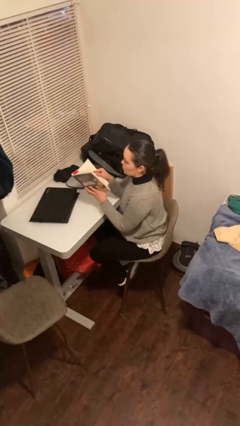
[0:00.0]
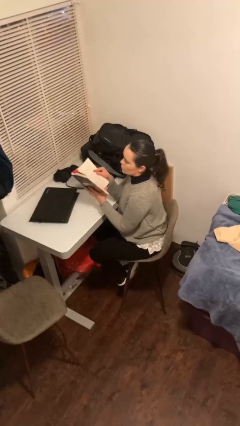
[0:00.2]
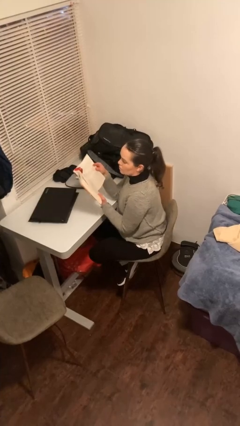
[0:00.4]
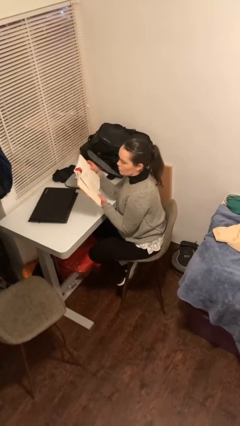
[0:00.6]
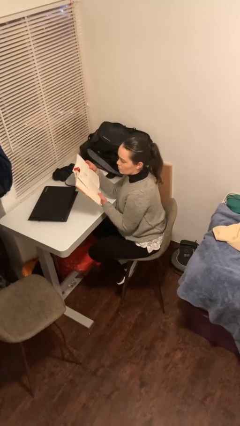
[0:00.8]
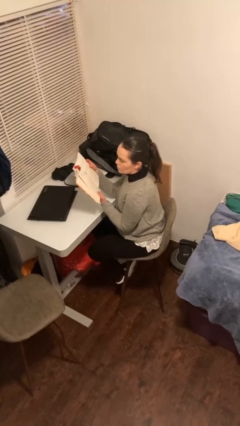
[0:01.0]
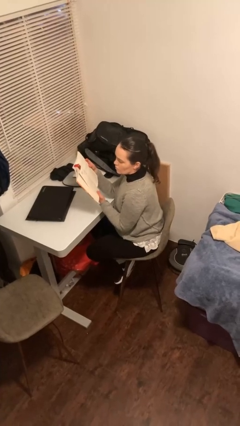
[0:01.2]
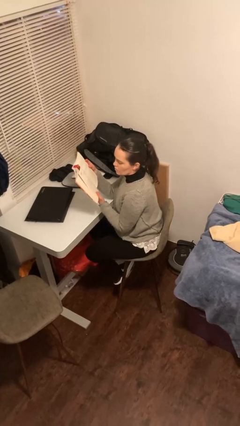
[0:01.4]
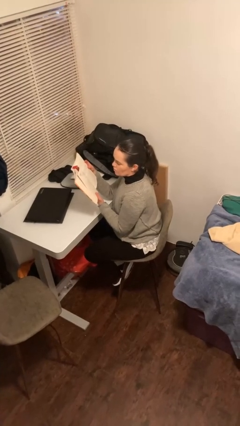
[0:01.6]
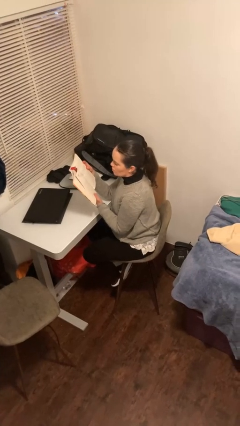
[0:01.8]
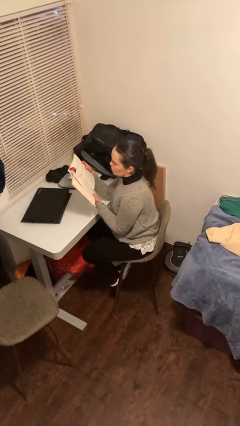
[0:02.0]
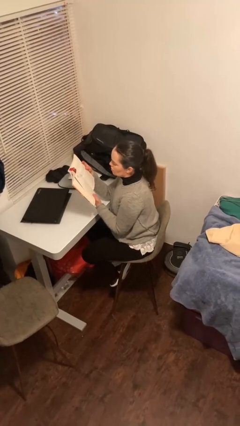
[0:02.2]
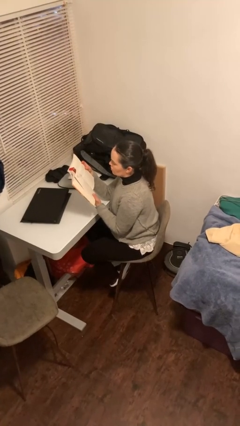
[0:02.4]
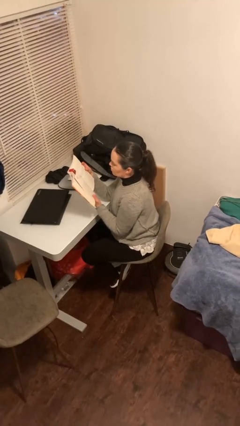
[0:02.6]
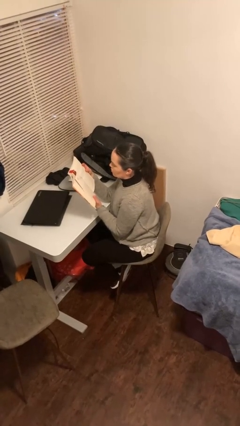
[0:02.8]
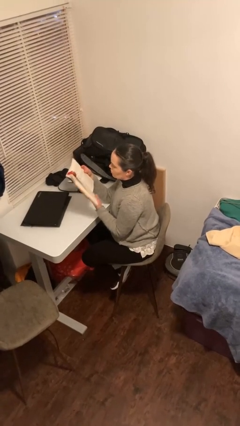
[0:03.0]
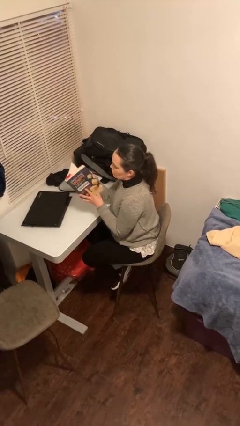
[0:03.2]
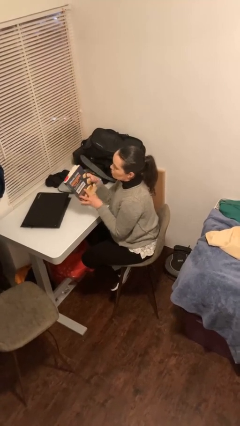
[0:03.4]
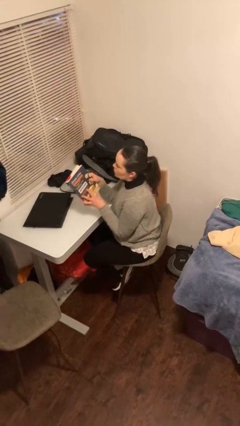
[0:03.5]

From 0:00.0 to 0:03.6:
person reads document

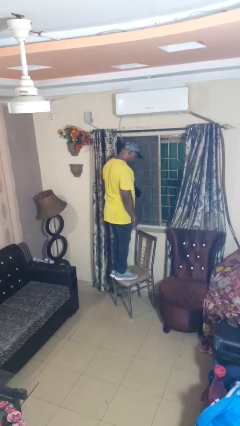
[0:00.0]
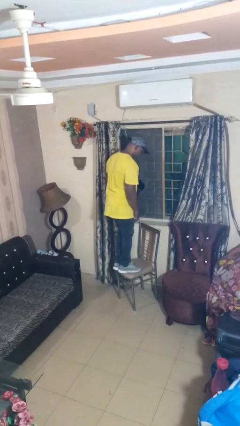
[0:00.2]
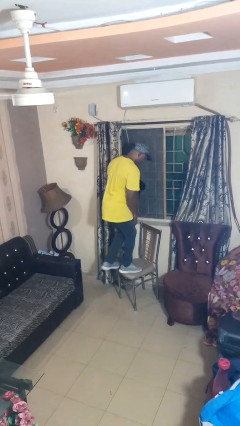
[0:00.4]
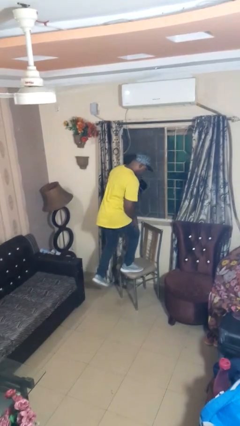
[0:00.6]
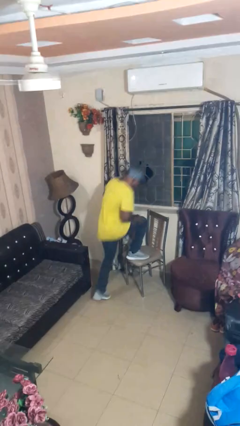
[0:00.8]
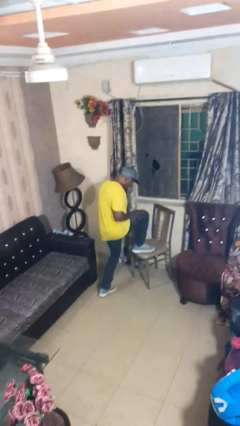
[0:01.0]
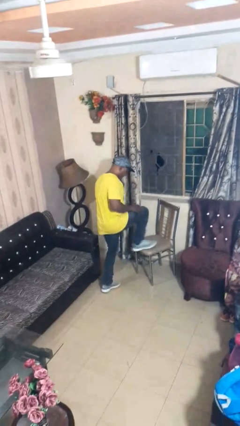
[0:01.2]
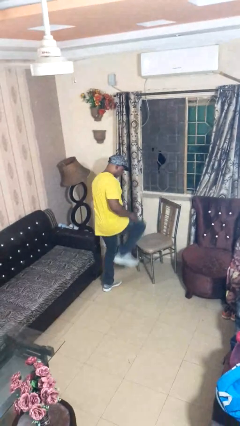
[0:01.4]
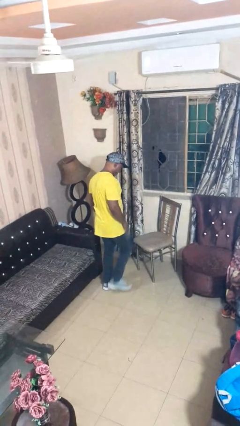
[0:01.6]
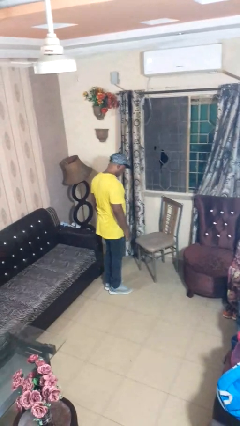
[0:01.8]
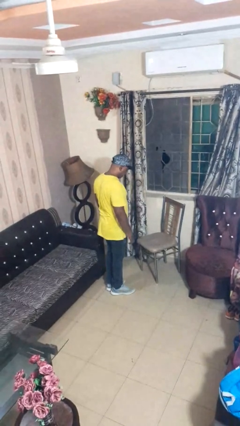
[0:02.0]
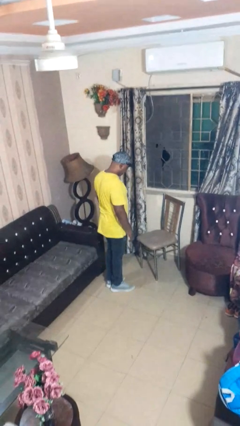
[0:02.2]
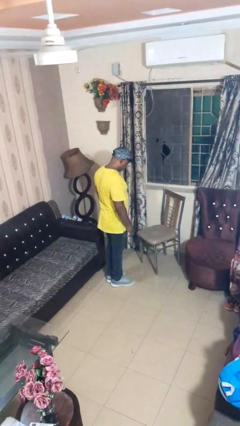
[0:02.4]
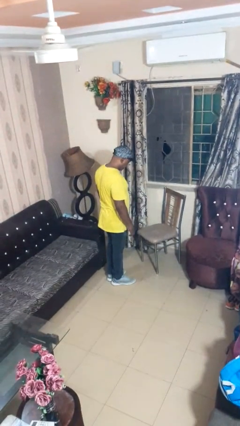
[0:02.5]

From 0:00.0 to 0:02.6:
person climbs off chair

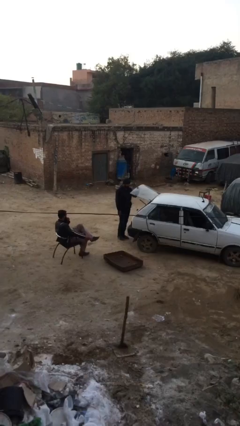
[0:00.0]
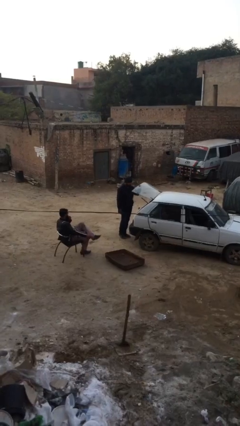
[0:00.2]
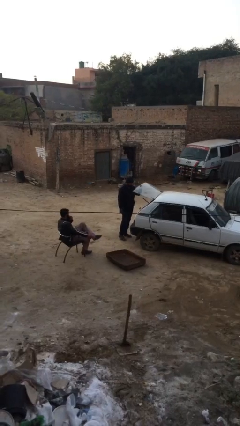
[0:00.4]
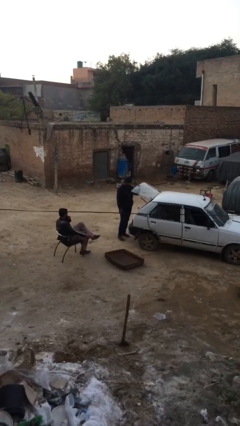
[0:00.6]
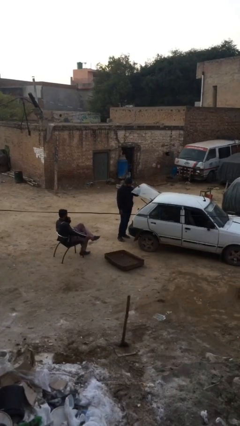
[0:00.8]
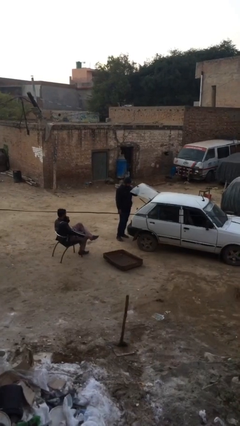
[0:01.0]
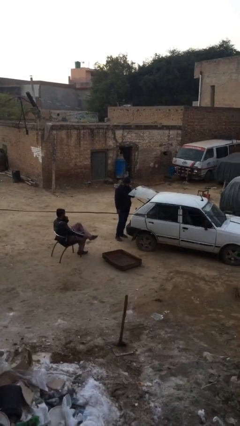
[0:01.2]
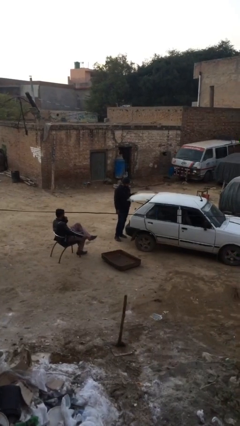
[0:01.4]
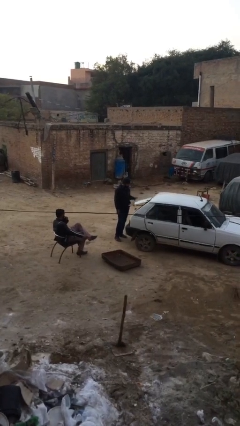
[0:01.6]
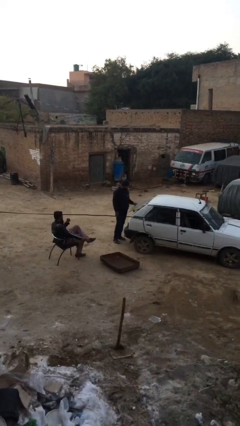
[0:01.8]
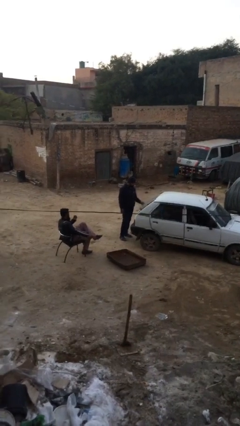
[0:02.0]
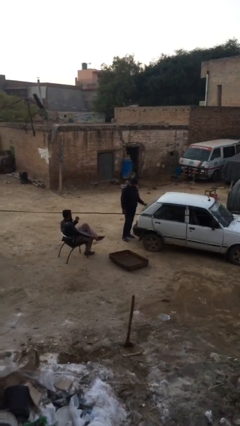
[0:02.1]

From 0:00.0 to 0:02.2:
person closes car trunk

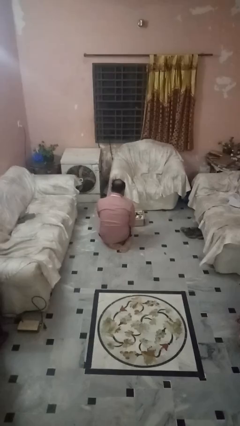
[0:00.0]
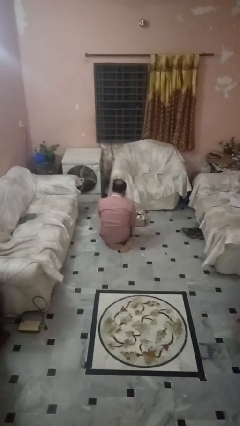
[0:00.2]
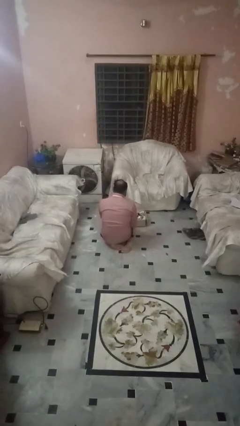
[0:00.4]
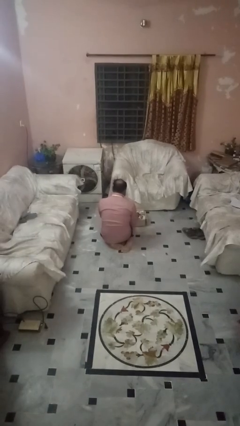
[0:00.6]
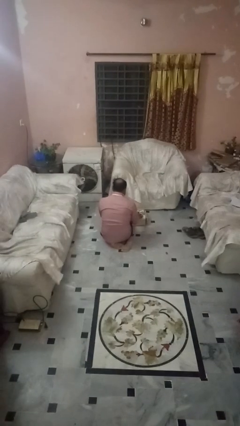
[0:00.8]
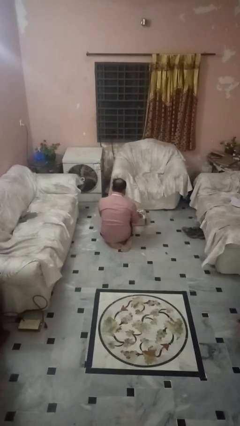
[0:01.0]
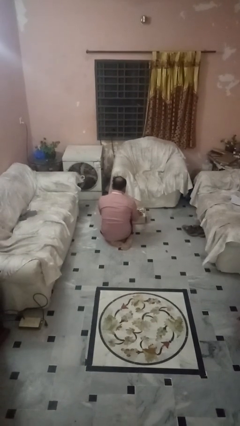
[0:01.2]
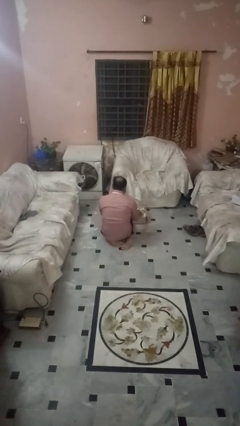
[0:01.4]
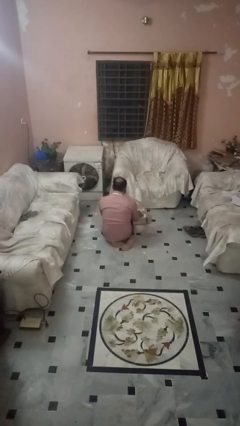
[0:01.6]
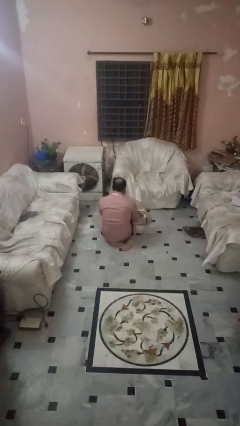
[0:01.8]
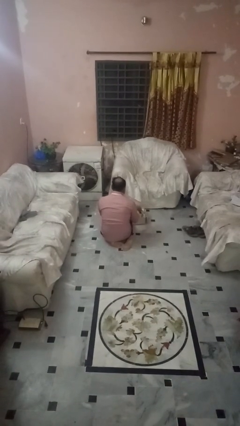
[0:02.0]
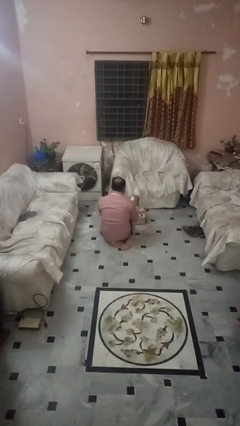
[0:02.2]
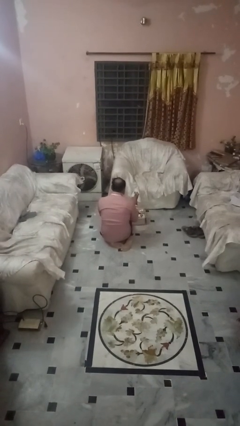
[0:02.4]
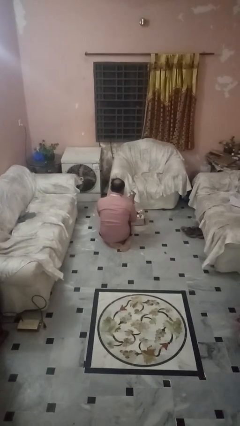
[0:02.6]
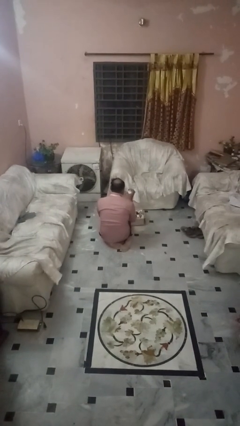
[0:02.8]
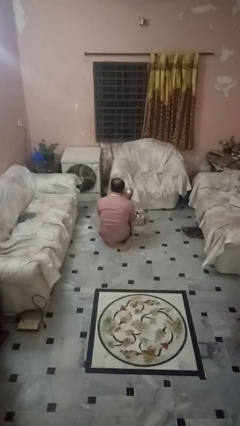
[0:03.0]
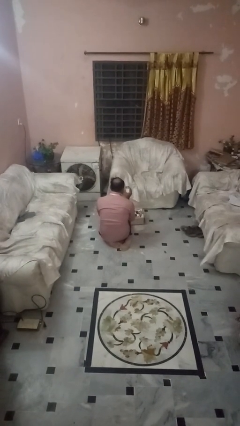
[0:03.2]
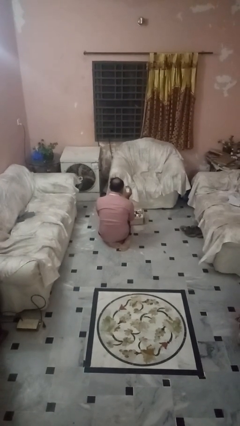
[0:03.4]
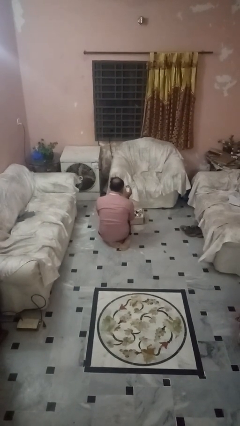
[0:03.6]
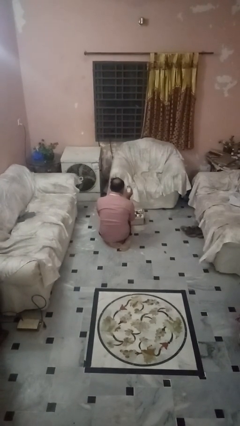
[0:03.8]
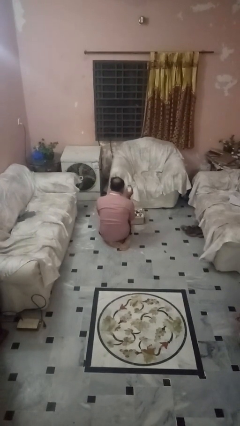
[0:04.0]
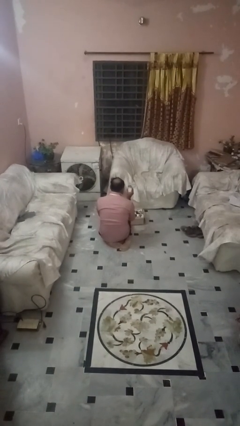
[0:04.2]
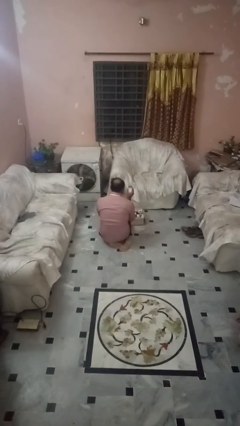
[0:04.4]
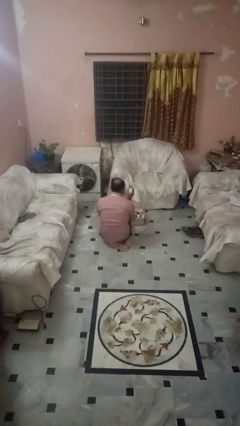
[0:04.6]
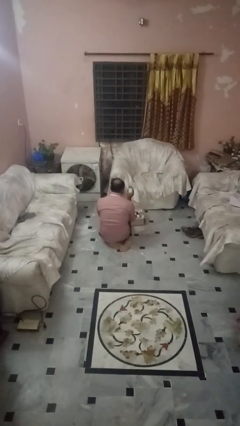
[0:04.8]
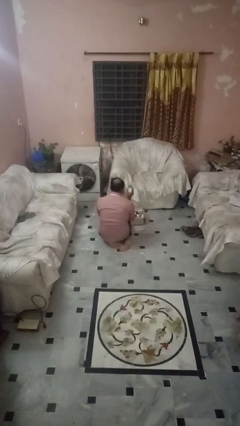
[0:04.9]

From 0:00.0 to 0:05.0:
person takes object from box

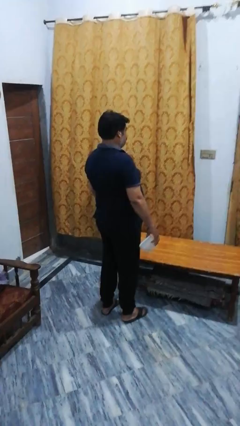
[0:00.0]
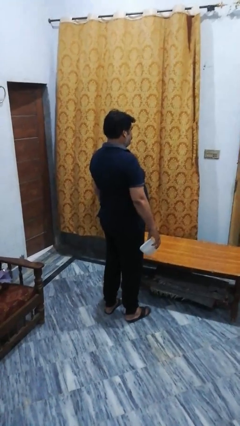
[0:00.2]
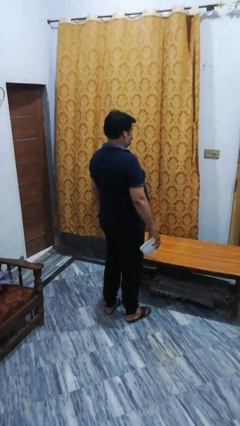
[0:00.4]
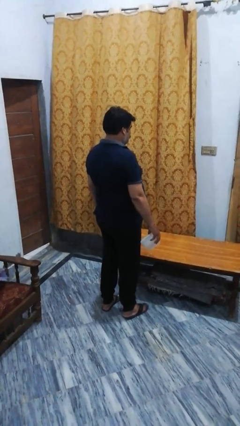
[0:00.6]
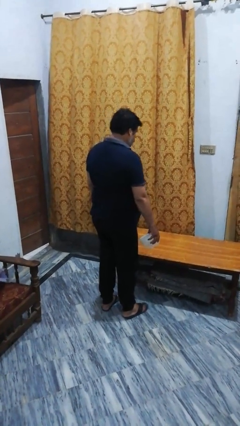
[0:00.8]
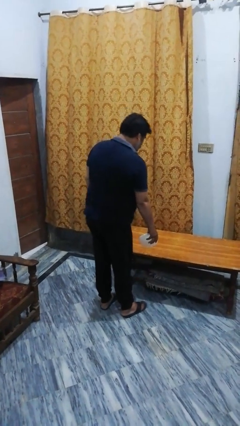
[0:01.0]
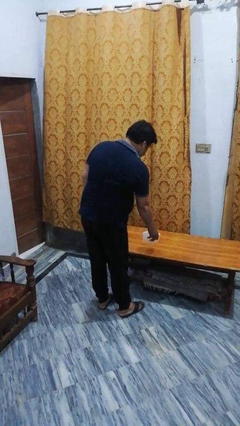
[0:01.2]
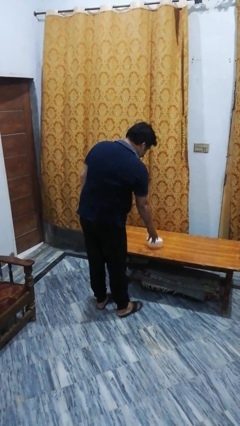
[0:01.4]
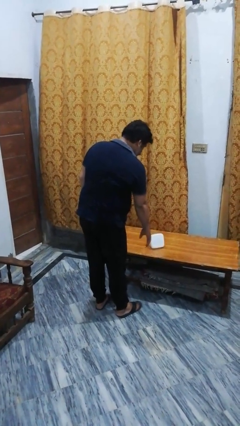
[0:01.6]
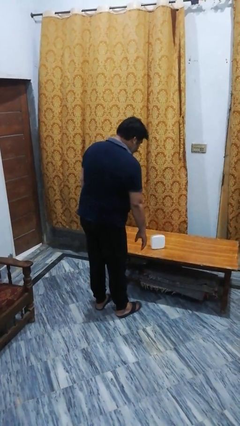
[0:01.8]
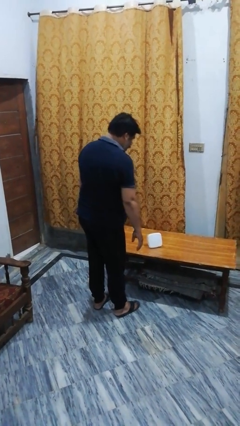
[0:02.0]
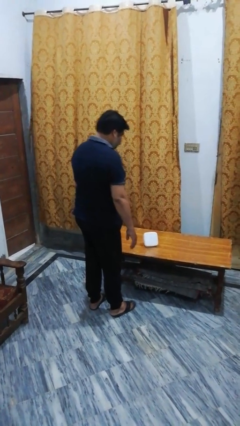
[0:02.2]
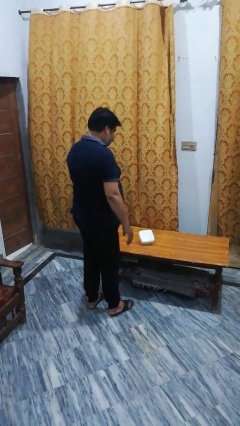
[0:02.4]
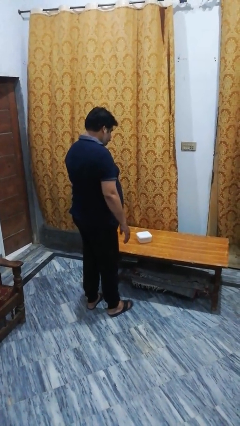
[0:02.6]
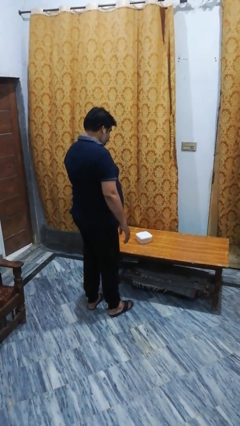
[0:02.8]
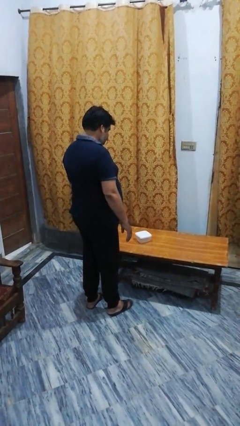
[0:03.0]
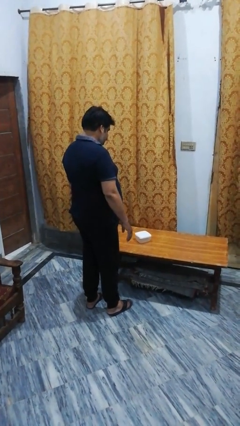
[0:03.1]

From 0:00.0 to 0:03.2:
person throws object on table

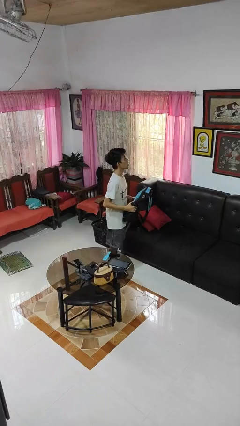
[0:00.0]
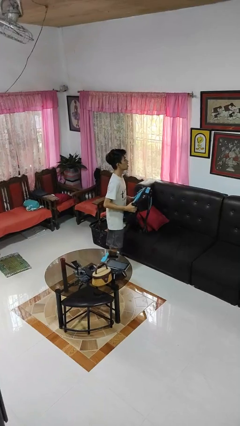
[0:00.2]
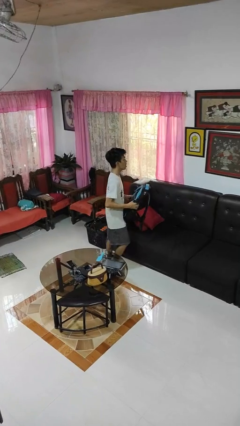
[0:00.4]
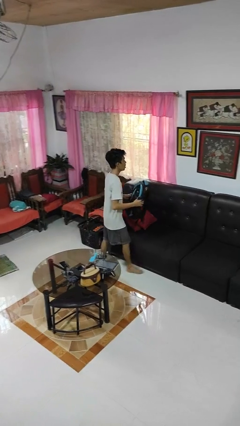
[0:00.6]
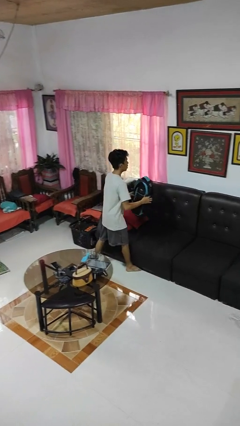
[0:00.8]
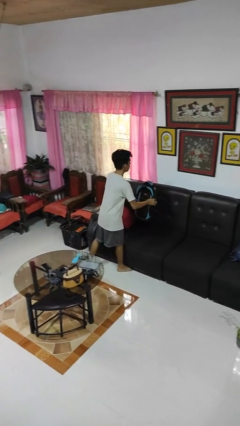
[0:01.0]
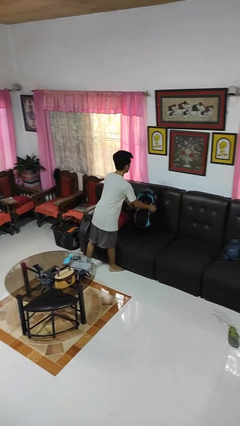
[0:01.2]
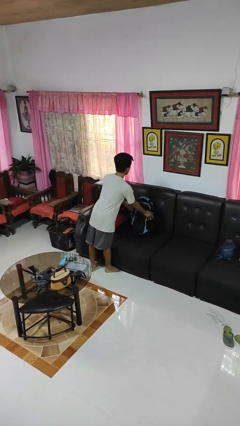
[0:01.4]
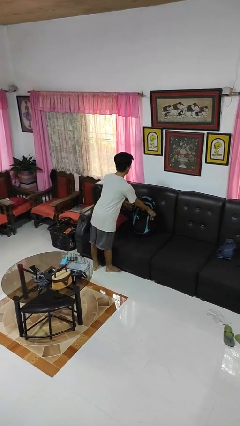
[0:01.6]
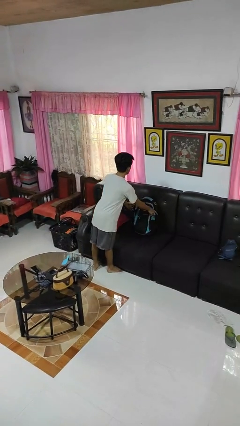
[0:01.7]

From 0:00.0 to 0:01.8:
person puts down object on couch
